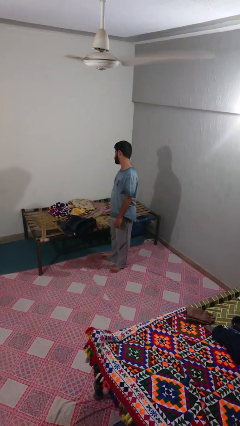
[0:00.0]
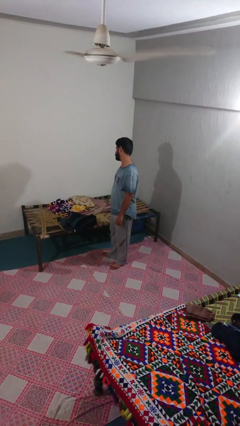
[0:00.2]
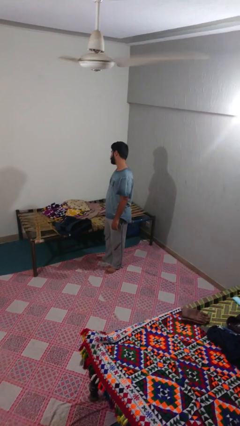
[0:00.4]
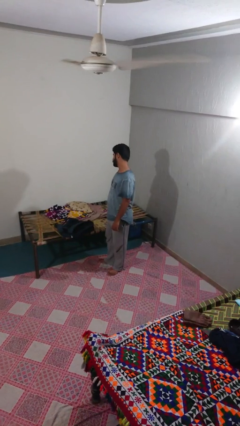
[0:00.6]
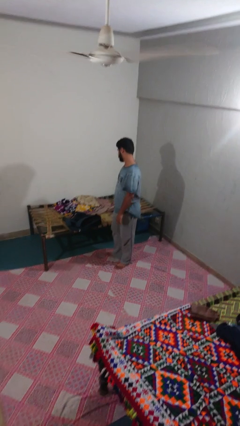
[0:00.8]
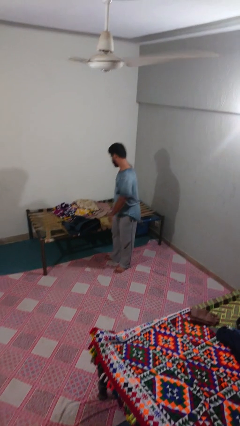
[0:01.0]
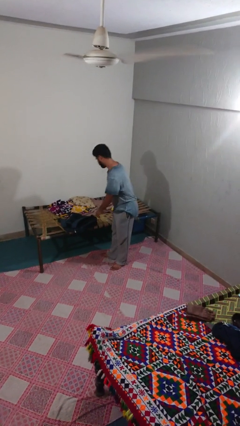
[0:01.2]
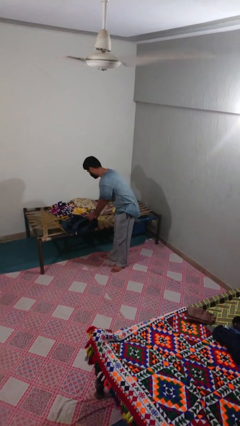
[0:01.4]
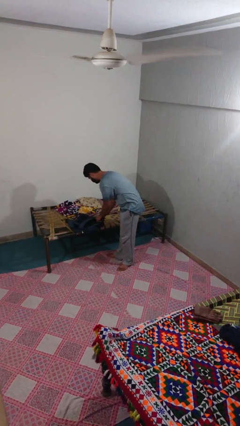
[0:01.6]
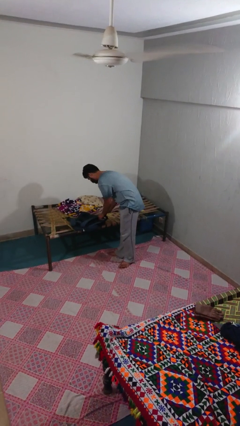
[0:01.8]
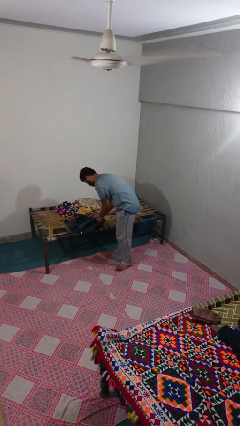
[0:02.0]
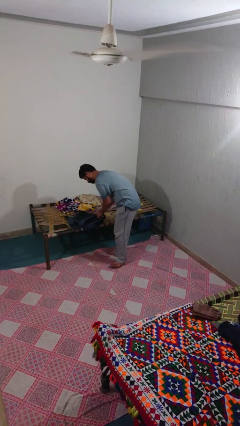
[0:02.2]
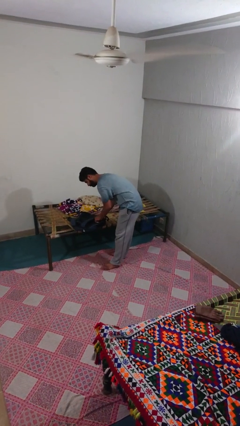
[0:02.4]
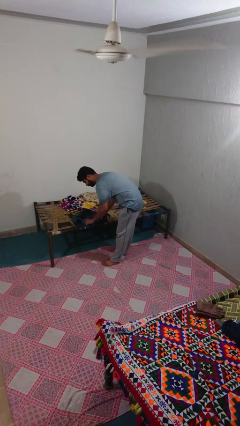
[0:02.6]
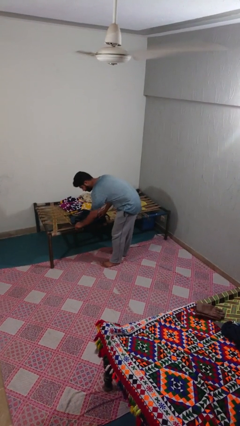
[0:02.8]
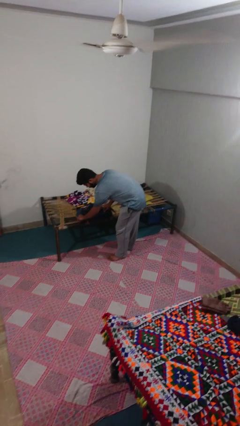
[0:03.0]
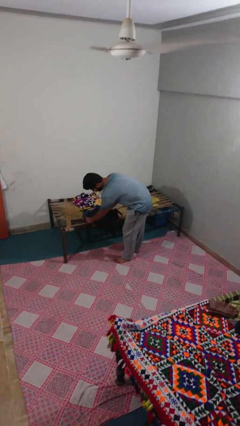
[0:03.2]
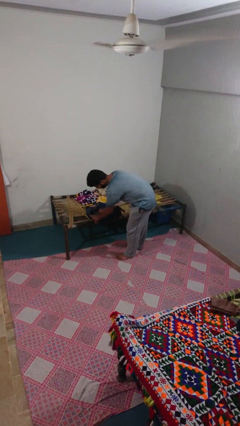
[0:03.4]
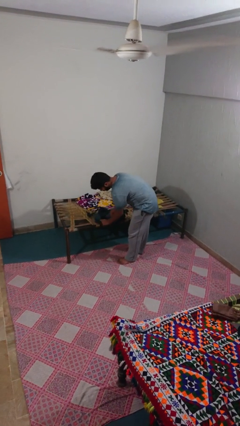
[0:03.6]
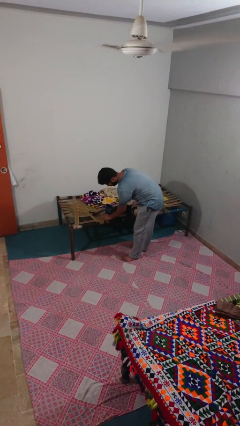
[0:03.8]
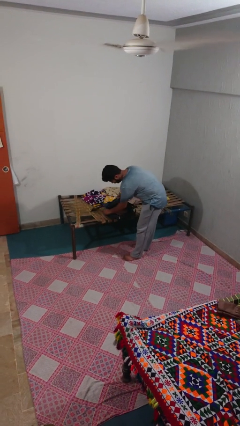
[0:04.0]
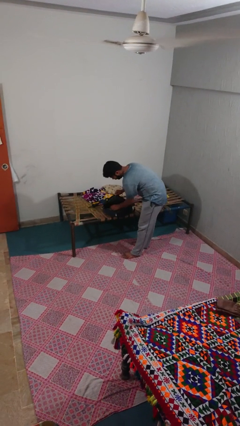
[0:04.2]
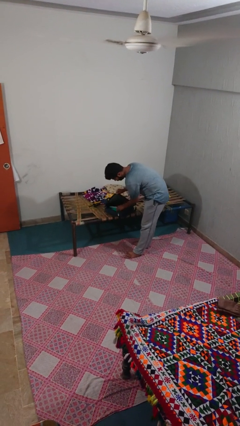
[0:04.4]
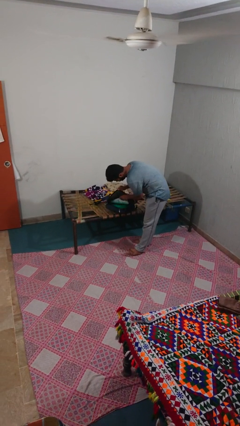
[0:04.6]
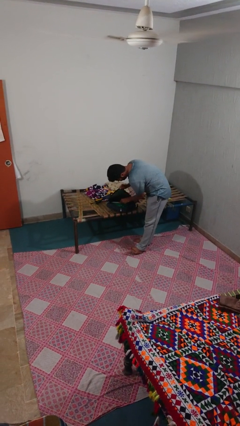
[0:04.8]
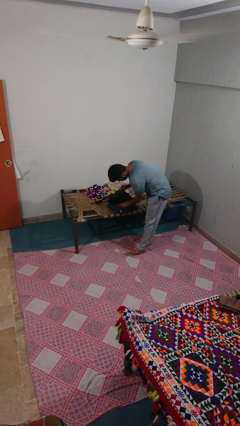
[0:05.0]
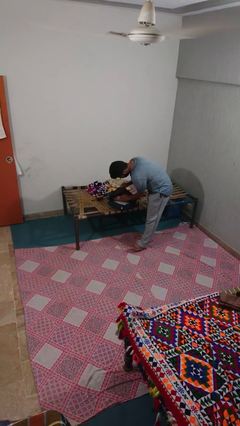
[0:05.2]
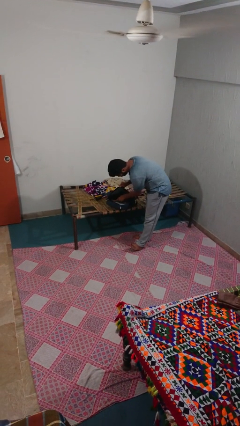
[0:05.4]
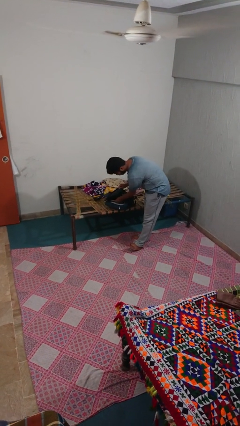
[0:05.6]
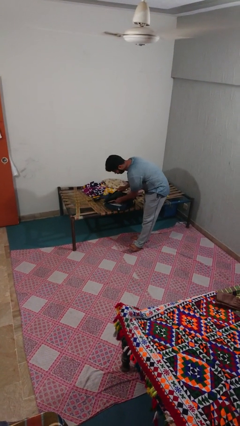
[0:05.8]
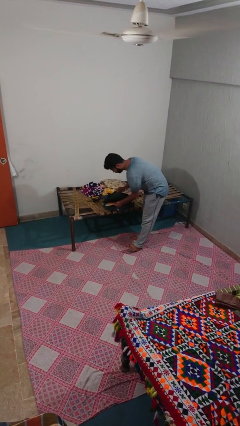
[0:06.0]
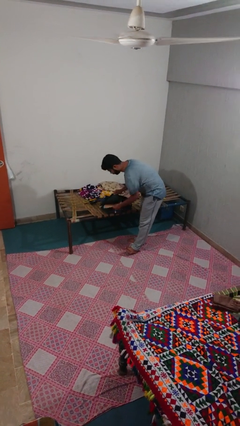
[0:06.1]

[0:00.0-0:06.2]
person searches in backpack

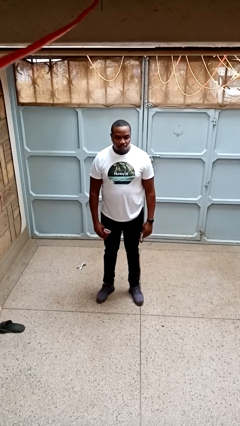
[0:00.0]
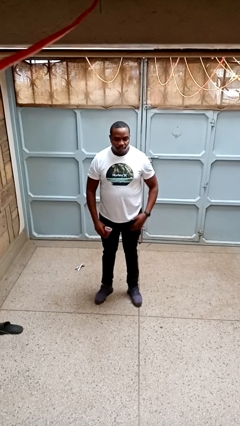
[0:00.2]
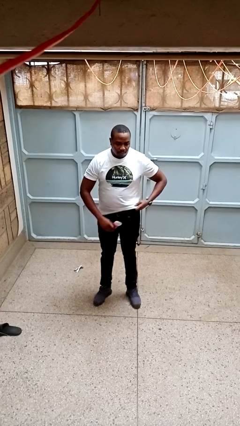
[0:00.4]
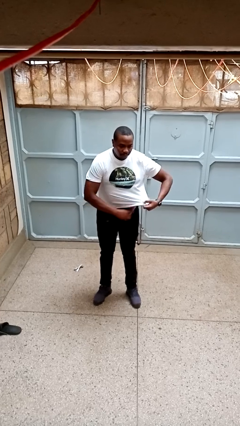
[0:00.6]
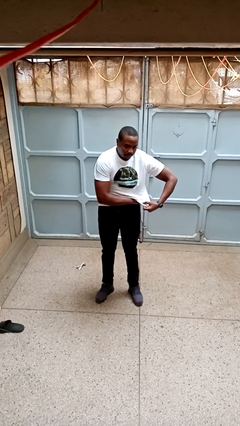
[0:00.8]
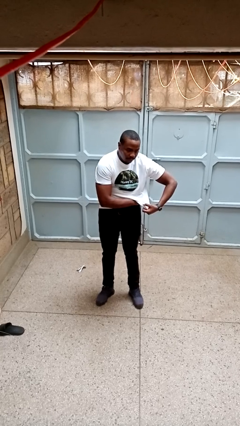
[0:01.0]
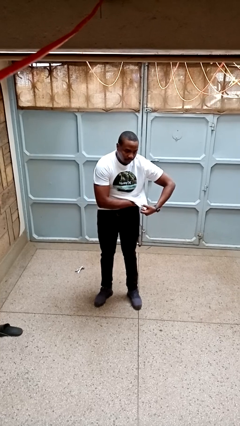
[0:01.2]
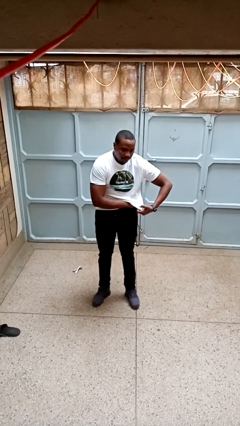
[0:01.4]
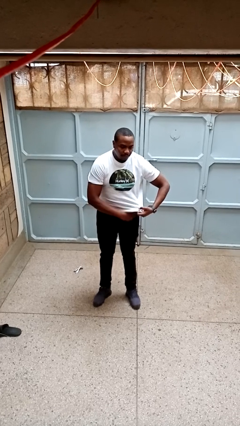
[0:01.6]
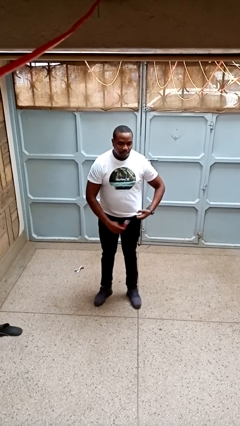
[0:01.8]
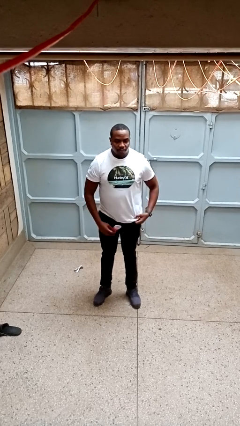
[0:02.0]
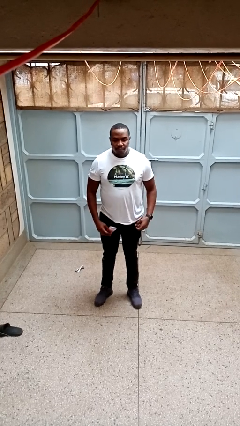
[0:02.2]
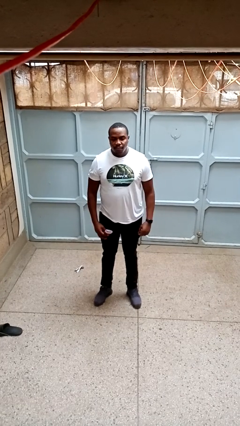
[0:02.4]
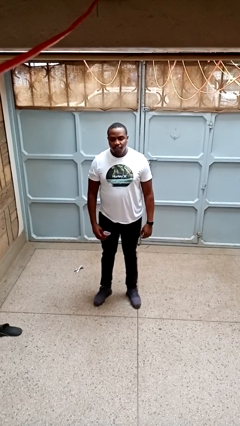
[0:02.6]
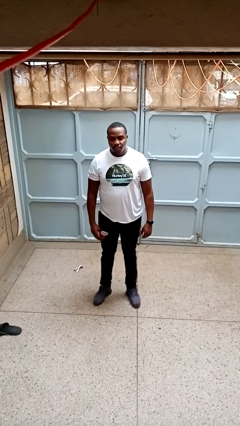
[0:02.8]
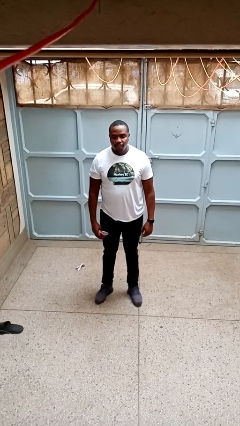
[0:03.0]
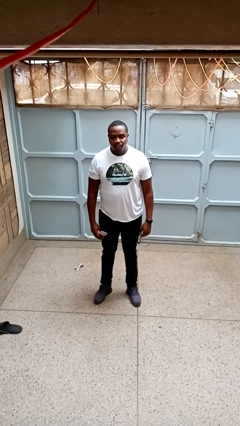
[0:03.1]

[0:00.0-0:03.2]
person applies deodorant

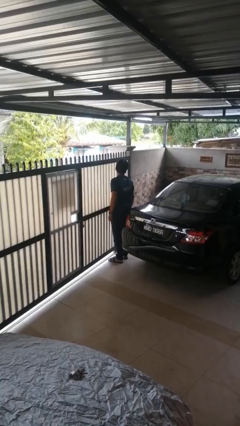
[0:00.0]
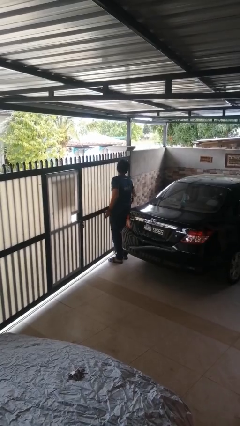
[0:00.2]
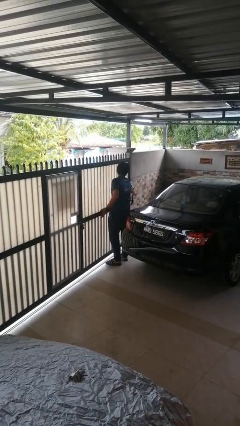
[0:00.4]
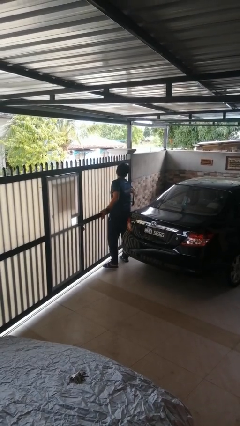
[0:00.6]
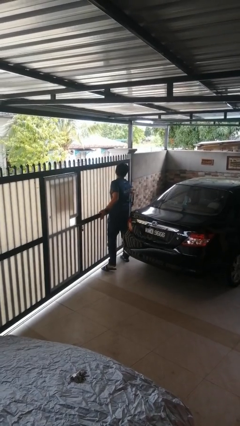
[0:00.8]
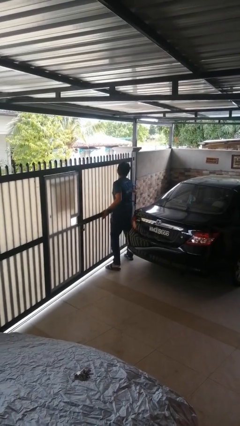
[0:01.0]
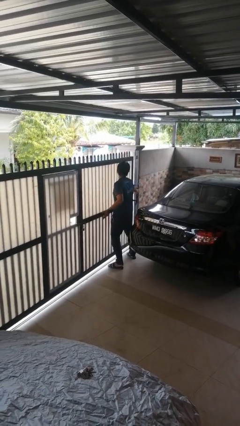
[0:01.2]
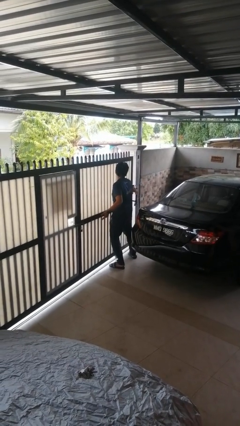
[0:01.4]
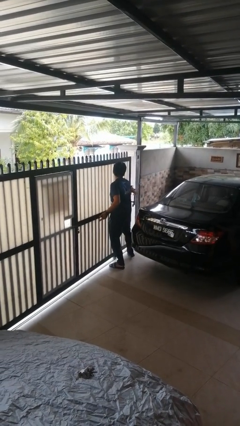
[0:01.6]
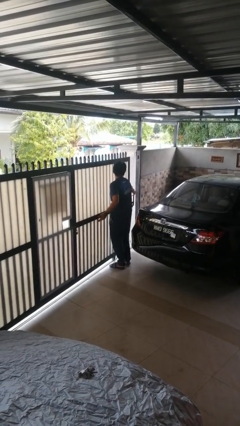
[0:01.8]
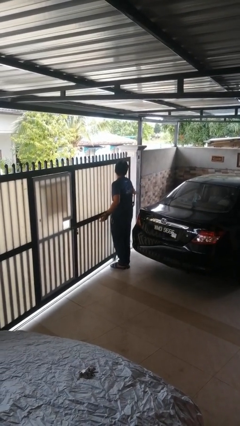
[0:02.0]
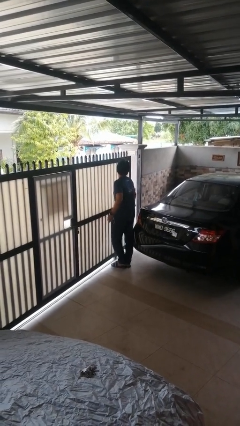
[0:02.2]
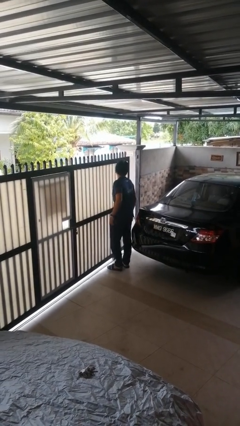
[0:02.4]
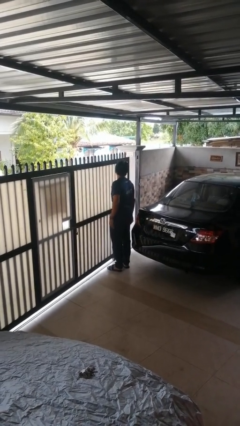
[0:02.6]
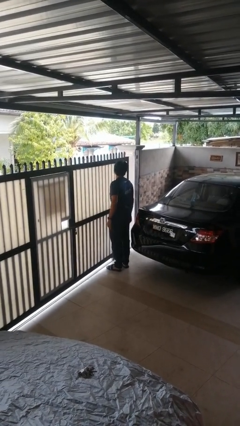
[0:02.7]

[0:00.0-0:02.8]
person opens sliding door

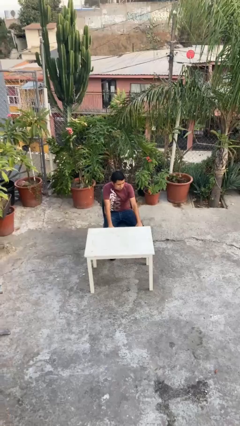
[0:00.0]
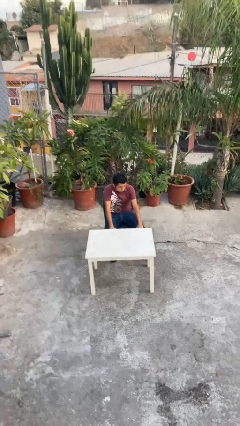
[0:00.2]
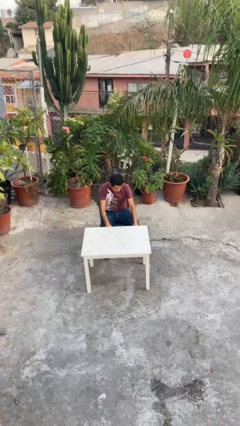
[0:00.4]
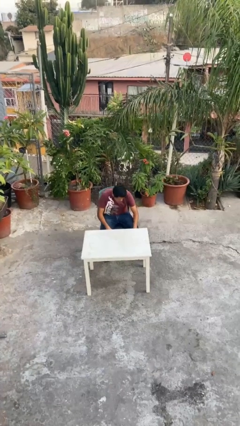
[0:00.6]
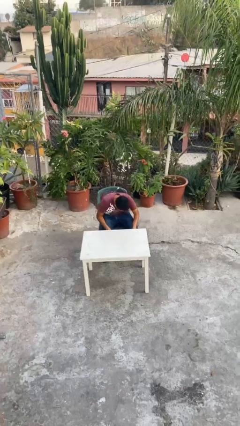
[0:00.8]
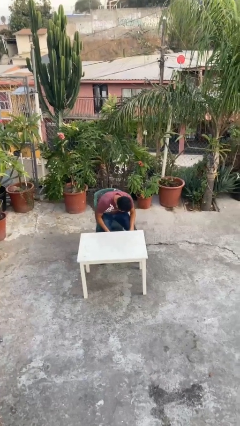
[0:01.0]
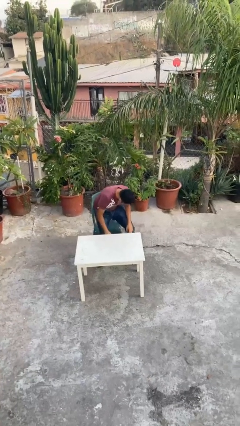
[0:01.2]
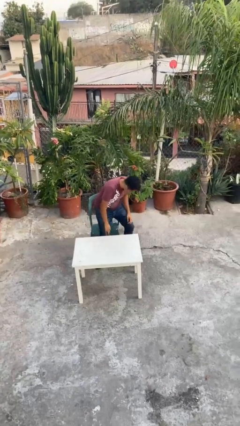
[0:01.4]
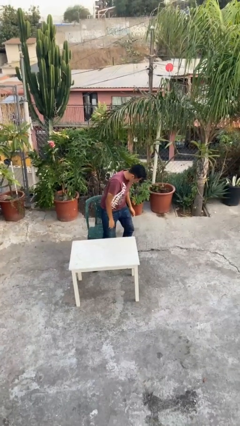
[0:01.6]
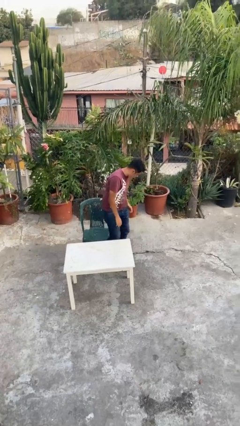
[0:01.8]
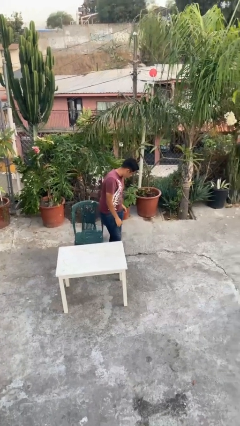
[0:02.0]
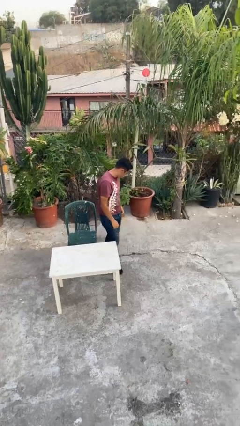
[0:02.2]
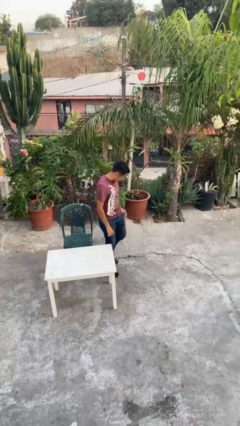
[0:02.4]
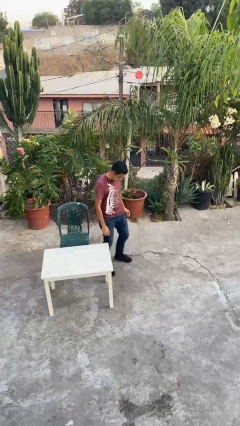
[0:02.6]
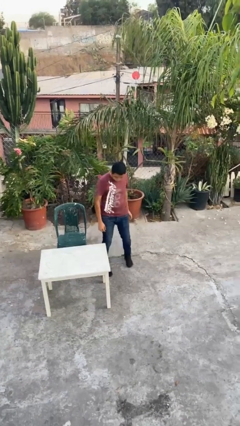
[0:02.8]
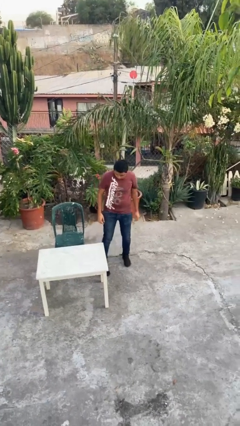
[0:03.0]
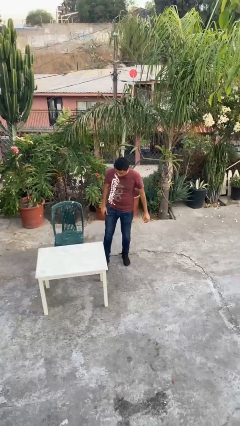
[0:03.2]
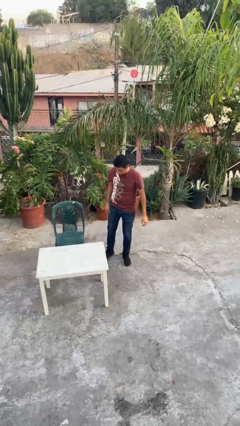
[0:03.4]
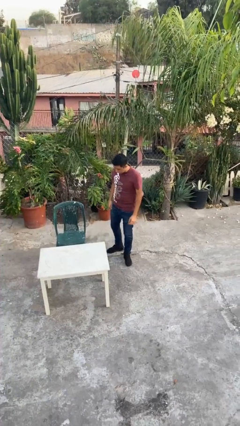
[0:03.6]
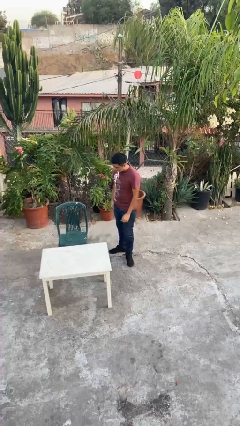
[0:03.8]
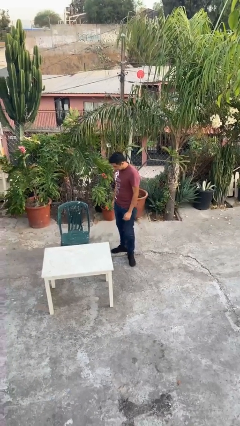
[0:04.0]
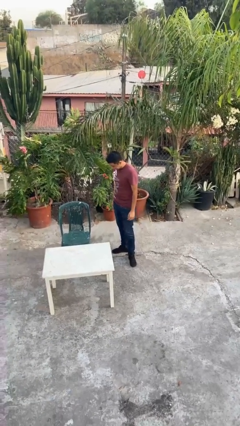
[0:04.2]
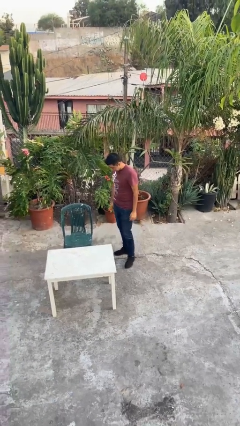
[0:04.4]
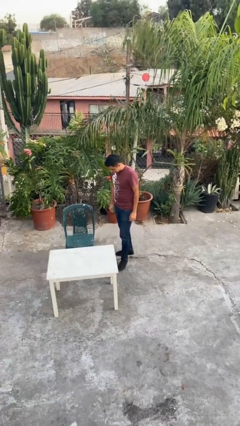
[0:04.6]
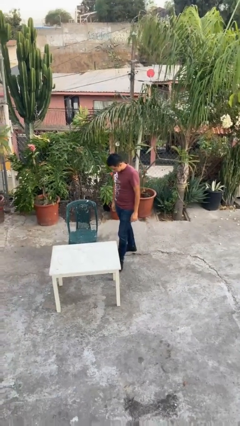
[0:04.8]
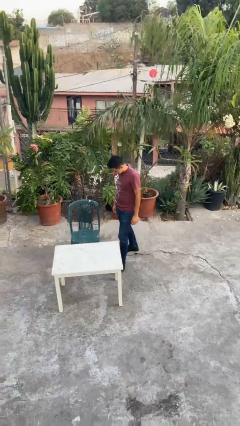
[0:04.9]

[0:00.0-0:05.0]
person stands up

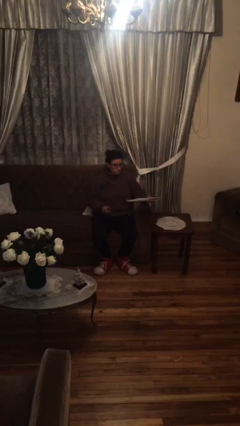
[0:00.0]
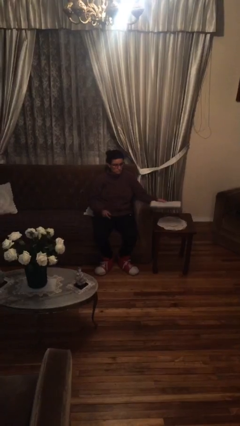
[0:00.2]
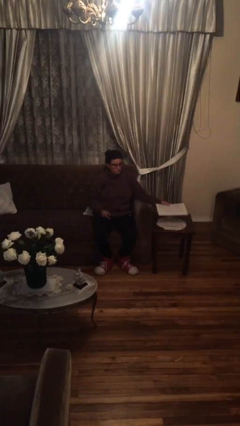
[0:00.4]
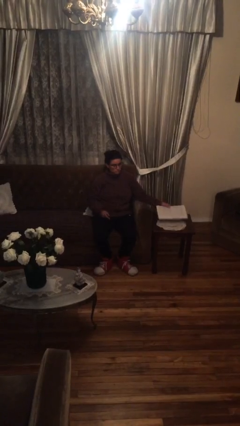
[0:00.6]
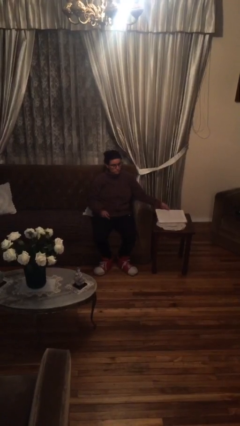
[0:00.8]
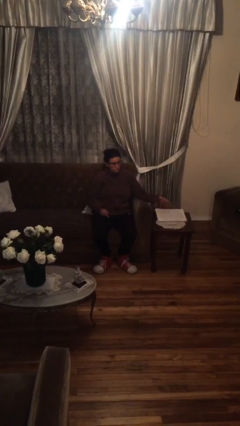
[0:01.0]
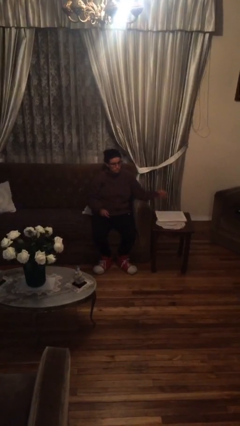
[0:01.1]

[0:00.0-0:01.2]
person puts down object on table
